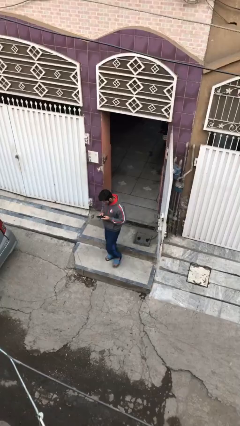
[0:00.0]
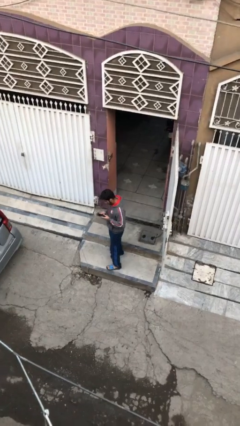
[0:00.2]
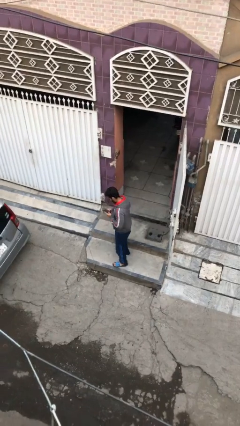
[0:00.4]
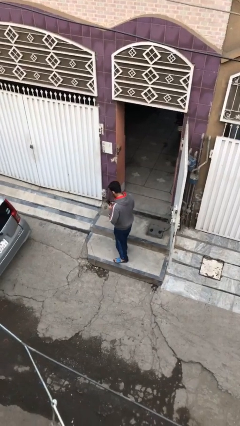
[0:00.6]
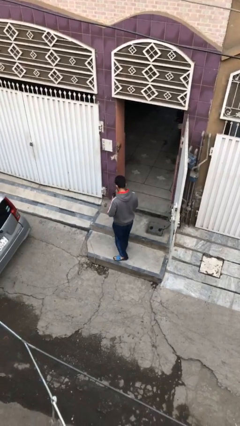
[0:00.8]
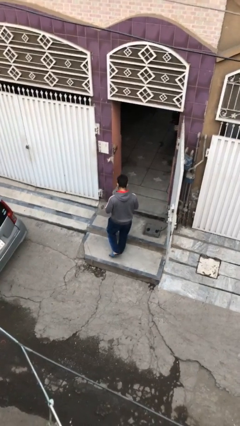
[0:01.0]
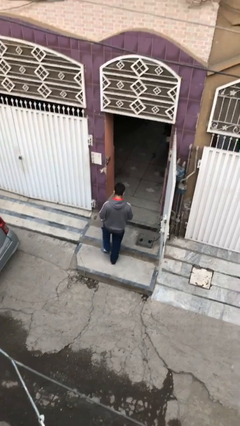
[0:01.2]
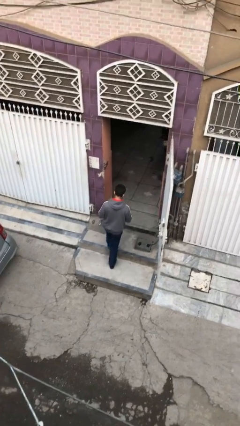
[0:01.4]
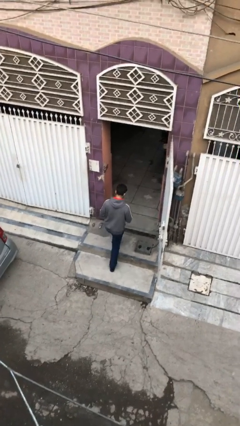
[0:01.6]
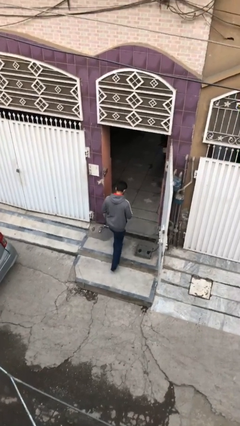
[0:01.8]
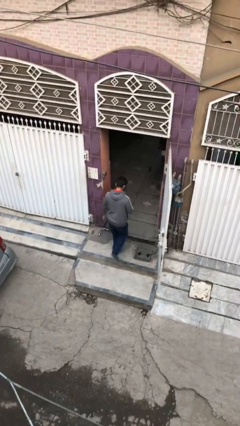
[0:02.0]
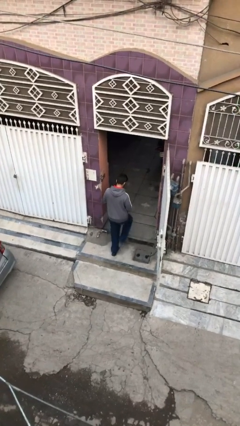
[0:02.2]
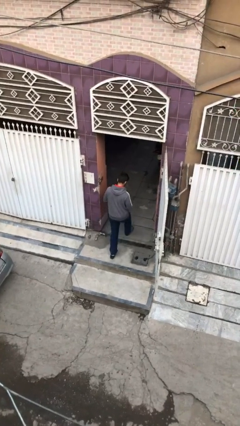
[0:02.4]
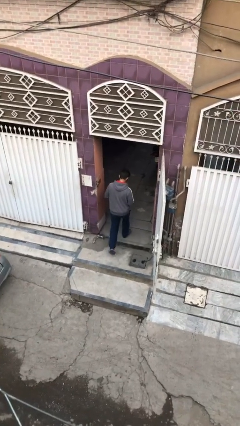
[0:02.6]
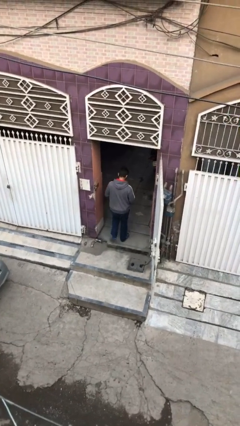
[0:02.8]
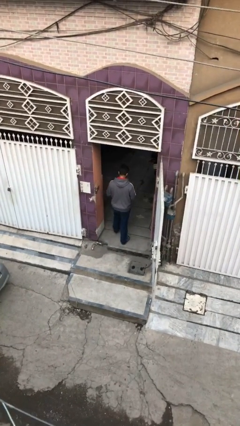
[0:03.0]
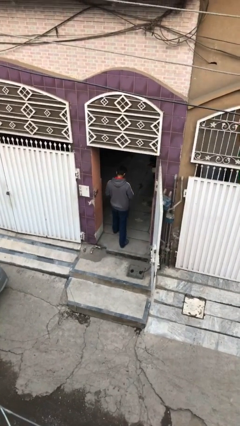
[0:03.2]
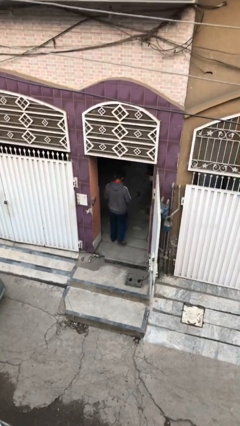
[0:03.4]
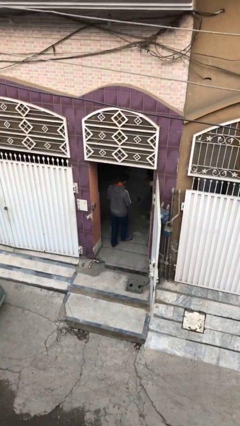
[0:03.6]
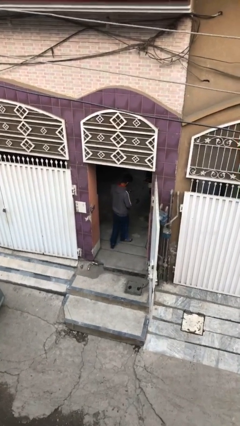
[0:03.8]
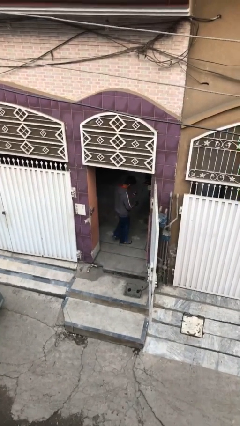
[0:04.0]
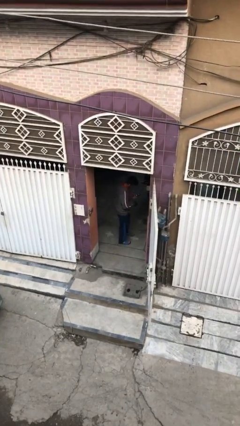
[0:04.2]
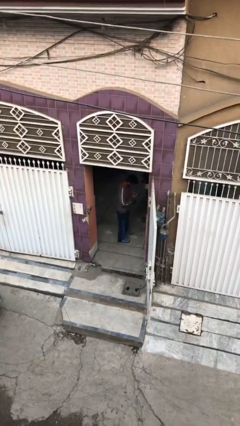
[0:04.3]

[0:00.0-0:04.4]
person exits scene through structure

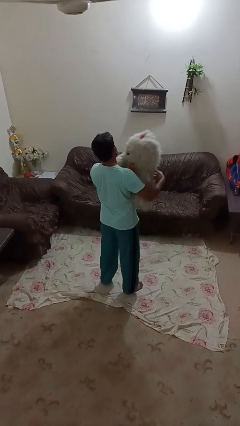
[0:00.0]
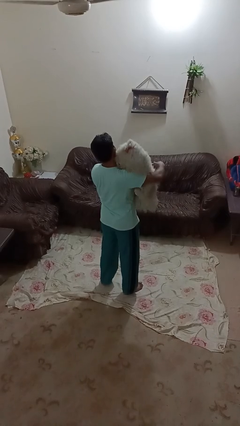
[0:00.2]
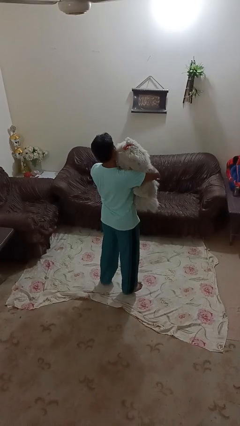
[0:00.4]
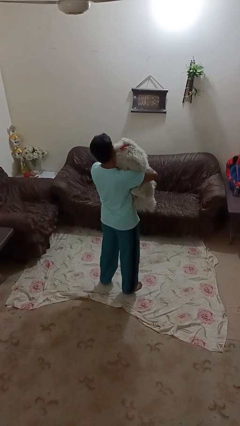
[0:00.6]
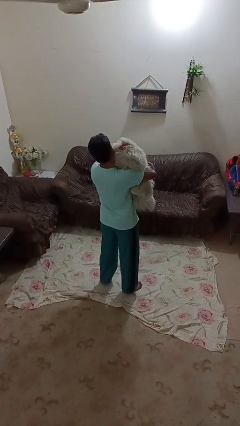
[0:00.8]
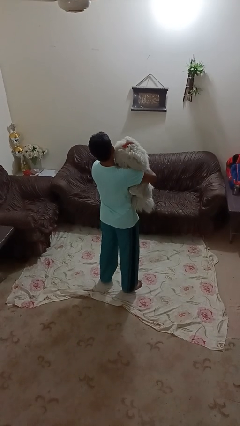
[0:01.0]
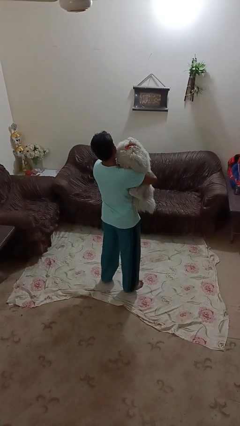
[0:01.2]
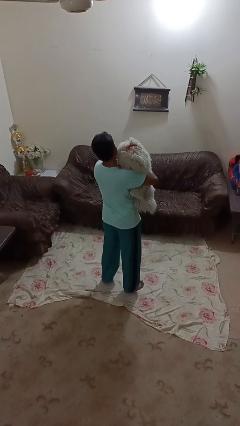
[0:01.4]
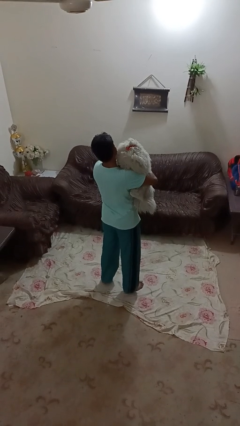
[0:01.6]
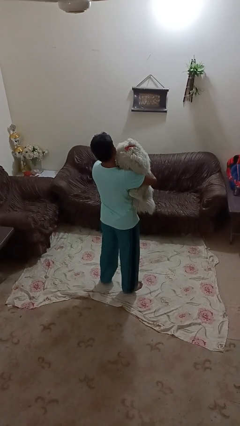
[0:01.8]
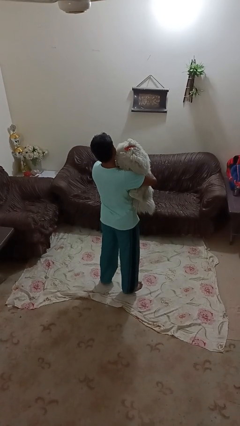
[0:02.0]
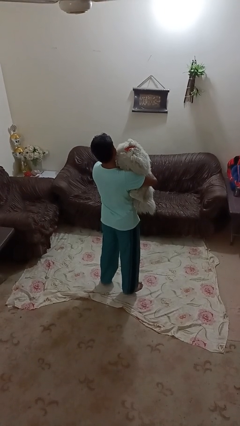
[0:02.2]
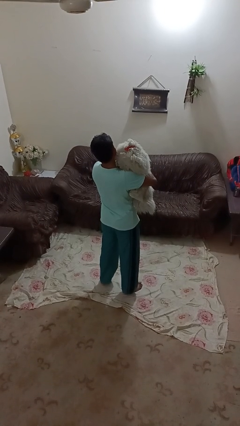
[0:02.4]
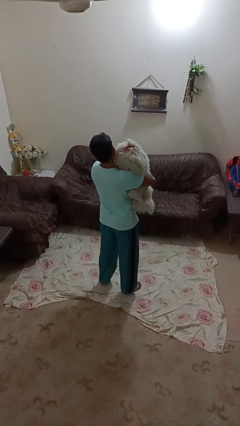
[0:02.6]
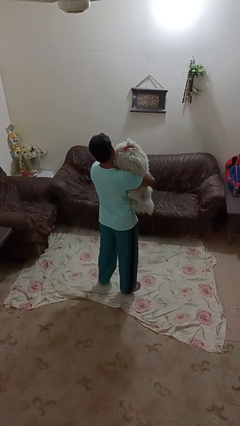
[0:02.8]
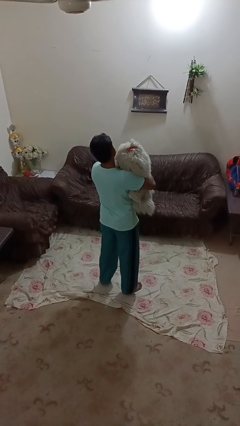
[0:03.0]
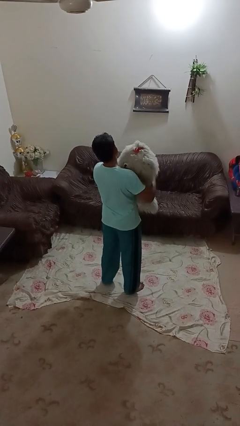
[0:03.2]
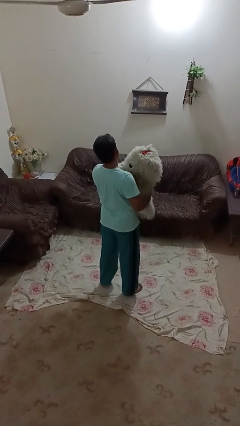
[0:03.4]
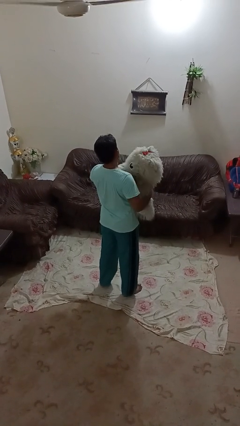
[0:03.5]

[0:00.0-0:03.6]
person hugs stuffed animal

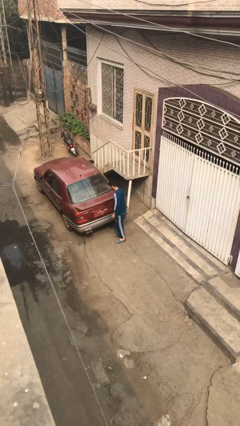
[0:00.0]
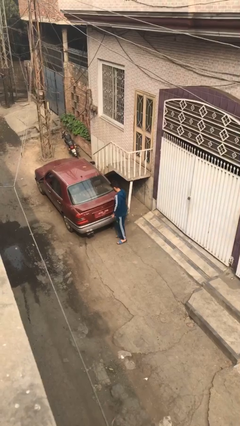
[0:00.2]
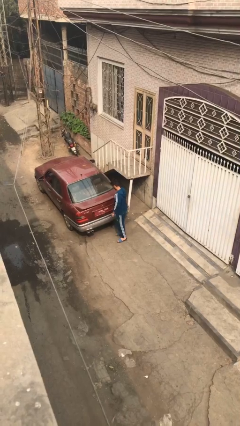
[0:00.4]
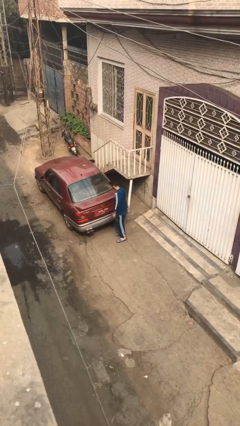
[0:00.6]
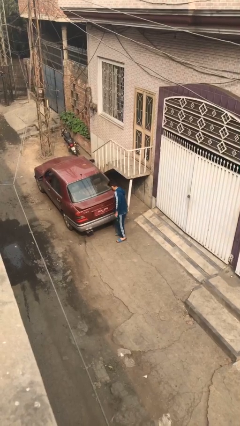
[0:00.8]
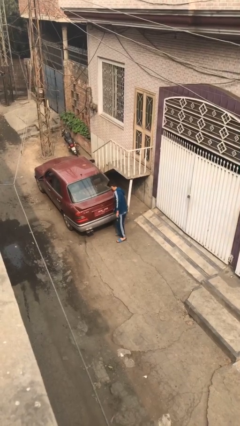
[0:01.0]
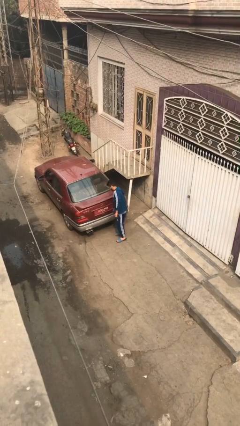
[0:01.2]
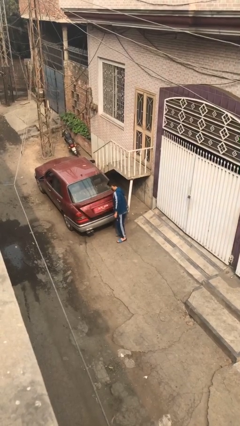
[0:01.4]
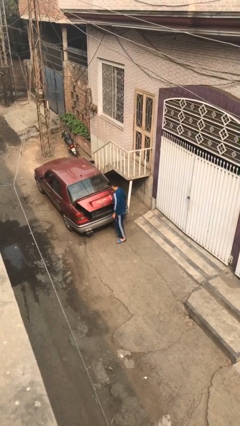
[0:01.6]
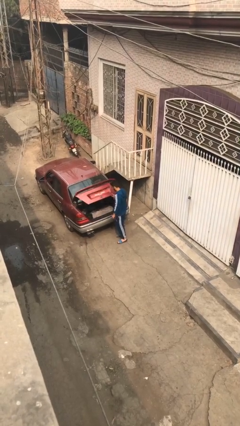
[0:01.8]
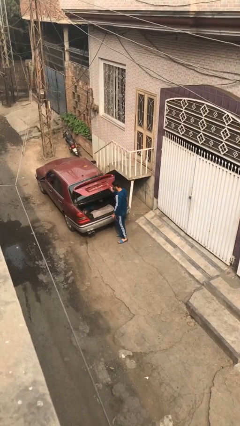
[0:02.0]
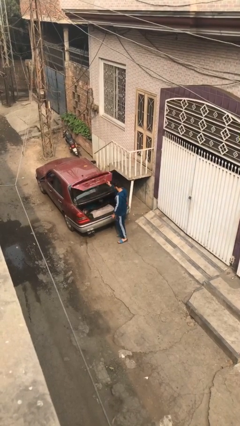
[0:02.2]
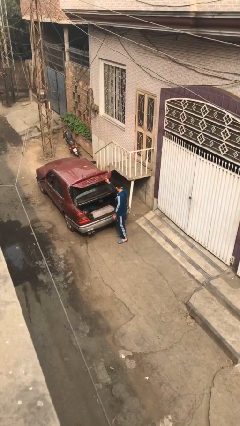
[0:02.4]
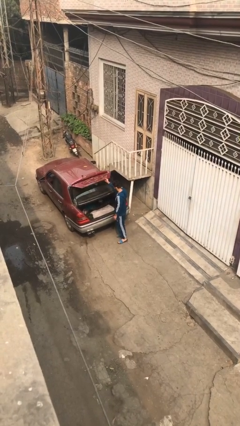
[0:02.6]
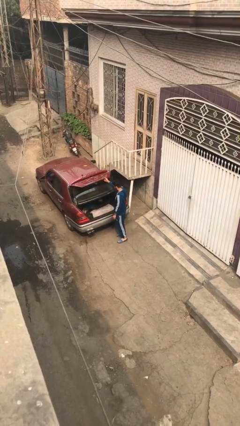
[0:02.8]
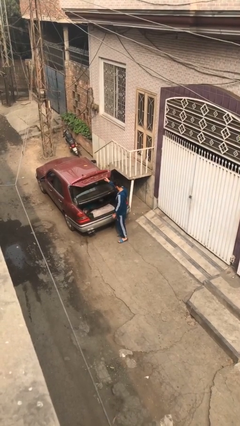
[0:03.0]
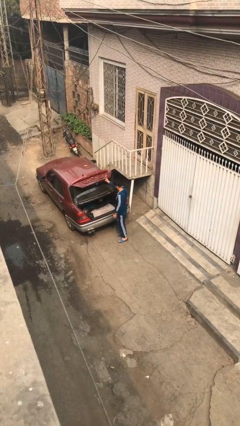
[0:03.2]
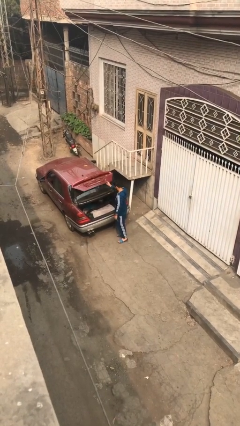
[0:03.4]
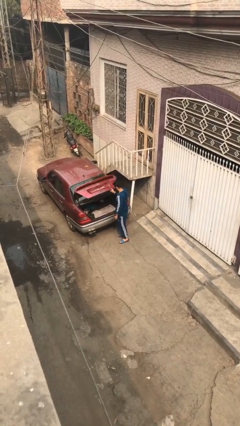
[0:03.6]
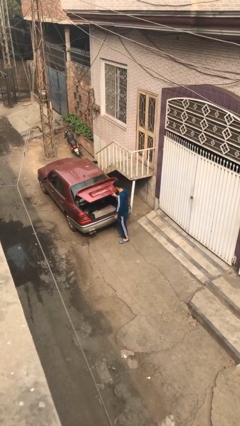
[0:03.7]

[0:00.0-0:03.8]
person opens car trunk

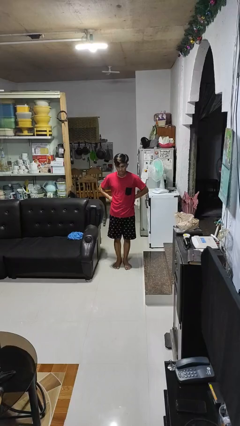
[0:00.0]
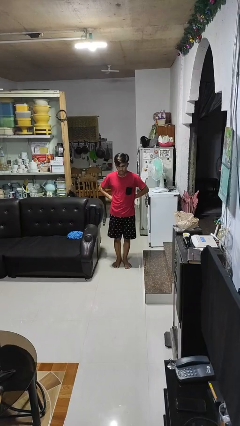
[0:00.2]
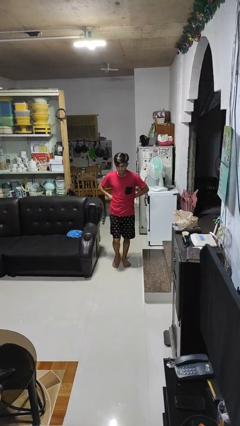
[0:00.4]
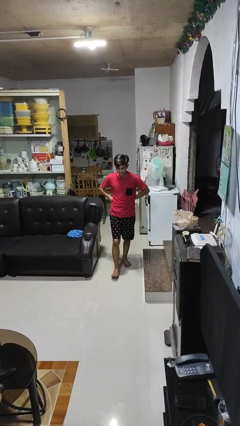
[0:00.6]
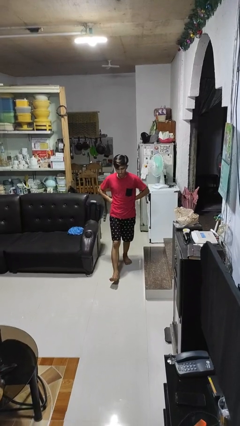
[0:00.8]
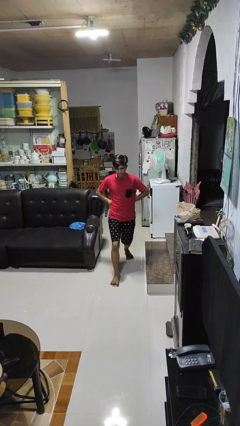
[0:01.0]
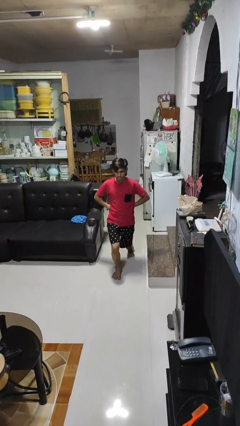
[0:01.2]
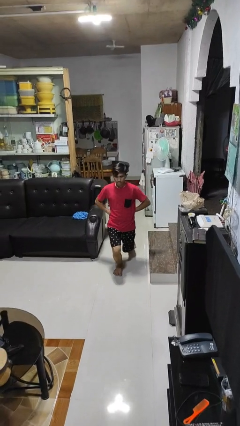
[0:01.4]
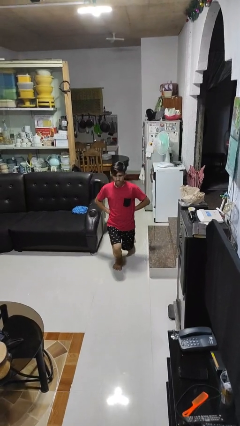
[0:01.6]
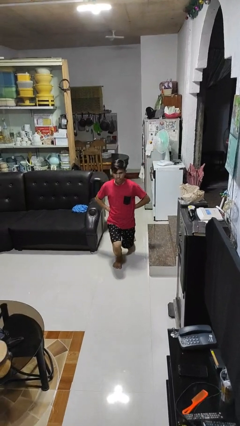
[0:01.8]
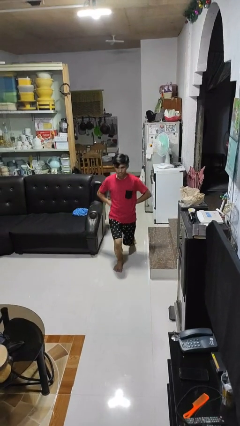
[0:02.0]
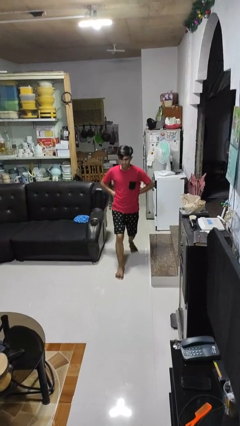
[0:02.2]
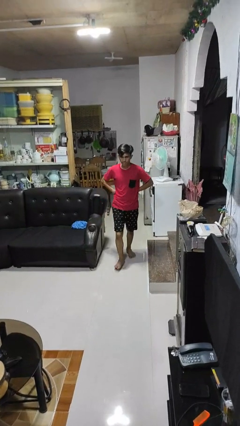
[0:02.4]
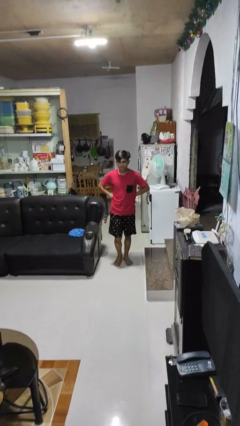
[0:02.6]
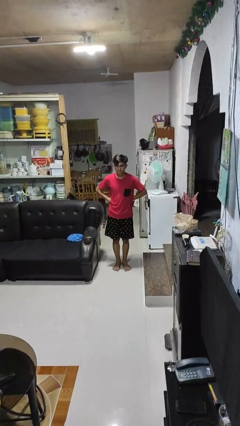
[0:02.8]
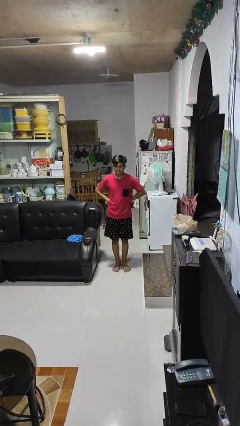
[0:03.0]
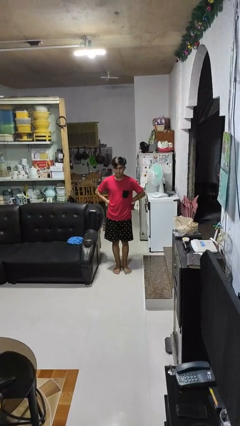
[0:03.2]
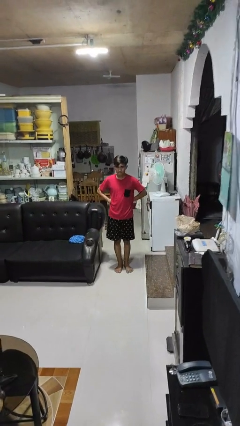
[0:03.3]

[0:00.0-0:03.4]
person exercises with lunges

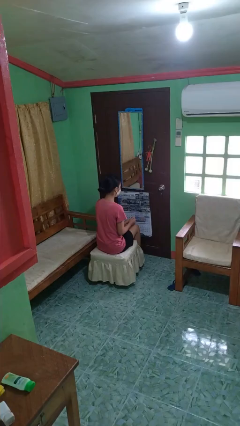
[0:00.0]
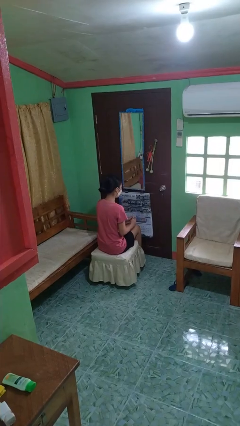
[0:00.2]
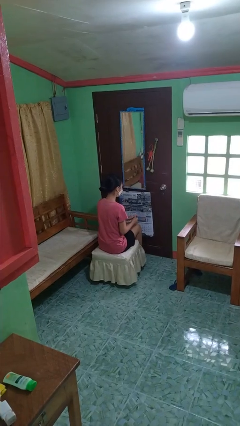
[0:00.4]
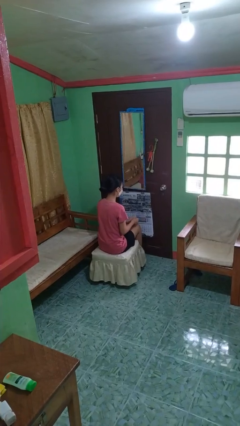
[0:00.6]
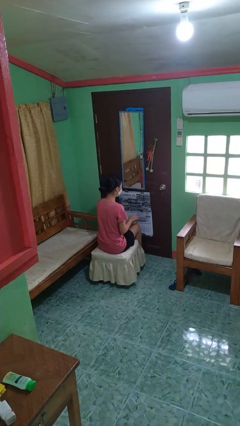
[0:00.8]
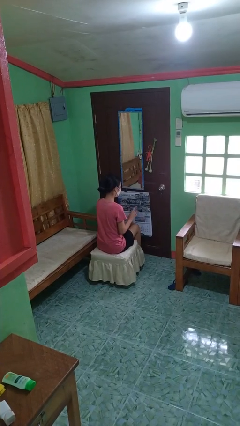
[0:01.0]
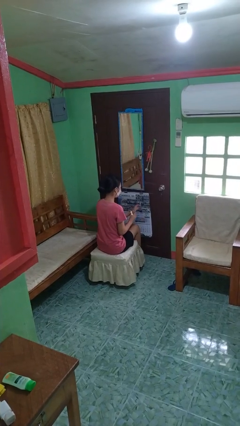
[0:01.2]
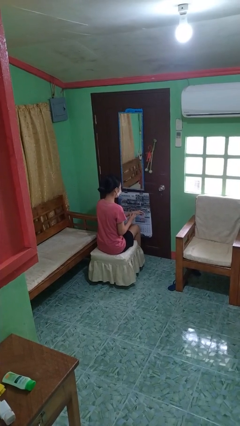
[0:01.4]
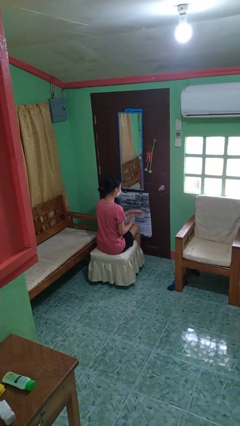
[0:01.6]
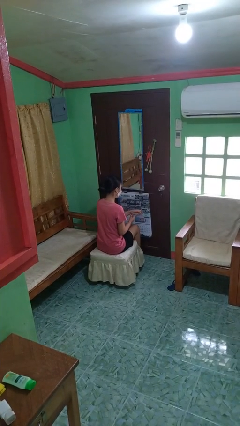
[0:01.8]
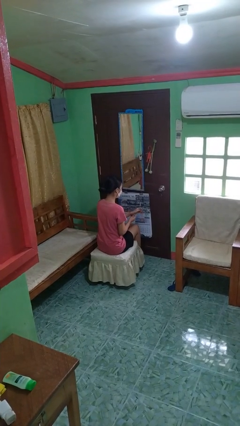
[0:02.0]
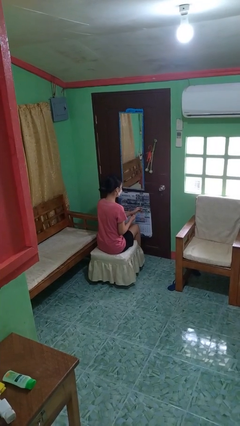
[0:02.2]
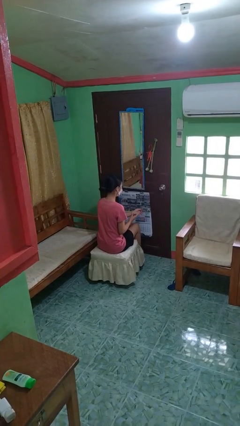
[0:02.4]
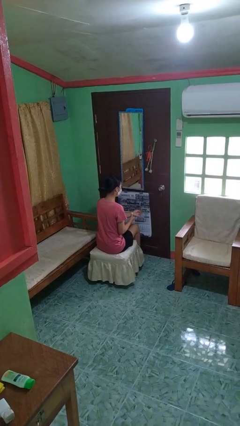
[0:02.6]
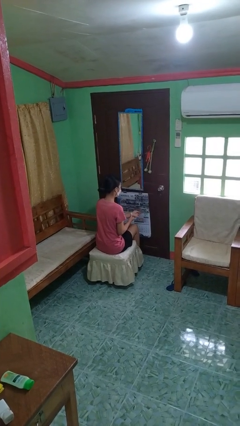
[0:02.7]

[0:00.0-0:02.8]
person puts on wristwatch

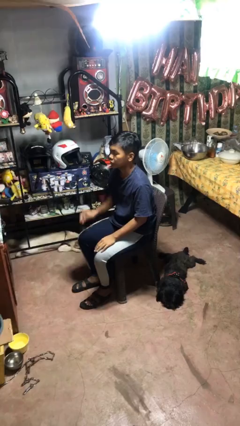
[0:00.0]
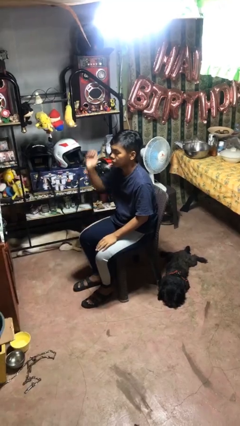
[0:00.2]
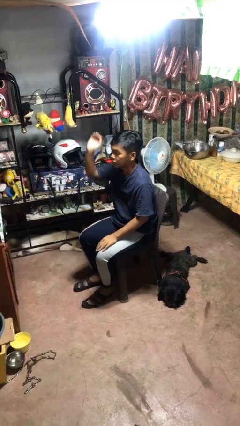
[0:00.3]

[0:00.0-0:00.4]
person gestures raise hand
